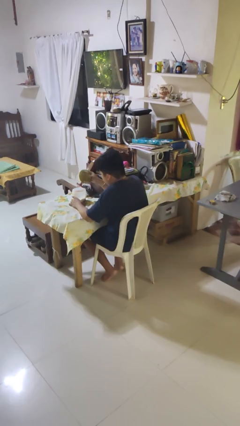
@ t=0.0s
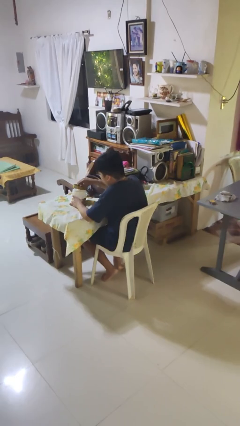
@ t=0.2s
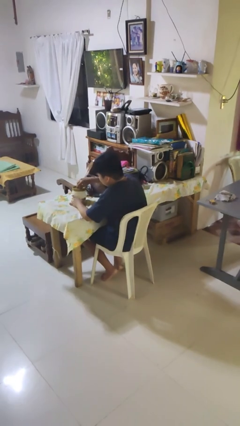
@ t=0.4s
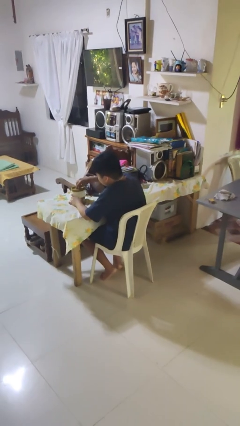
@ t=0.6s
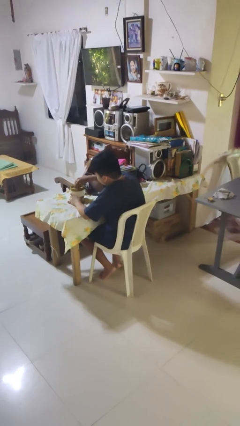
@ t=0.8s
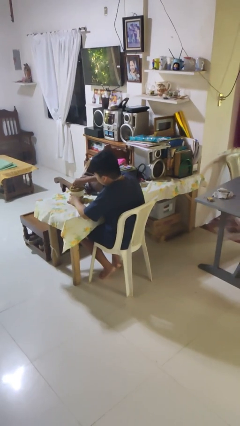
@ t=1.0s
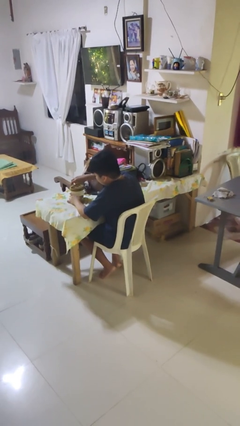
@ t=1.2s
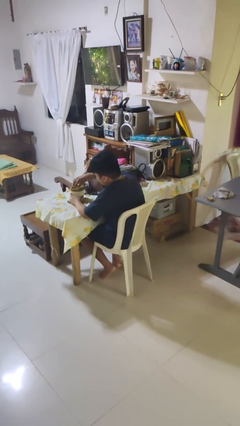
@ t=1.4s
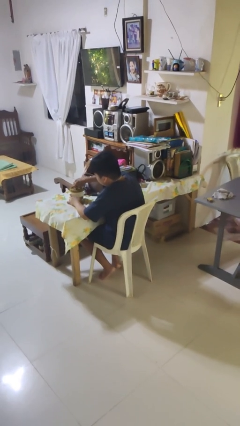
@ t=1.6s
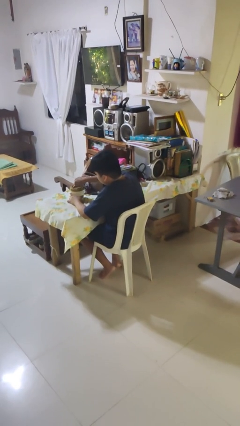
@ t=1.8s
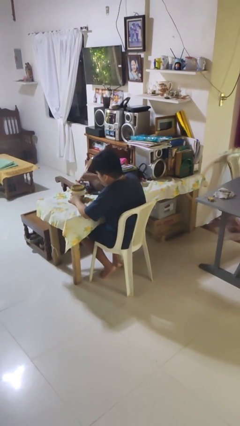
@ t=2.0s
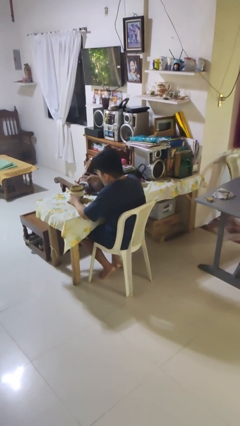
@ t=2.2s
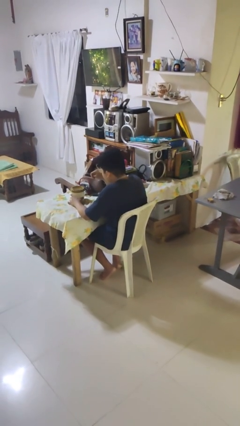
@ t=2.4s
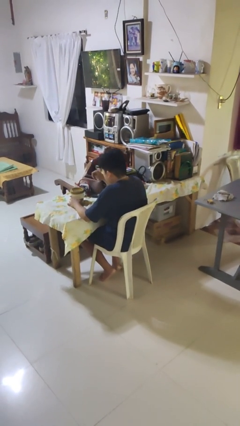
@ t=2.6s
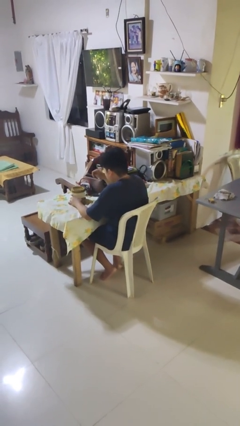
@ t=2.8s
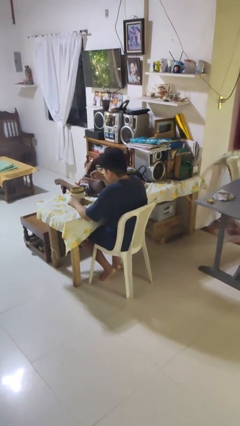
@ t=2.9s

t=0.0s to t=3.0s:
person closes jar

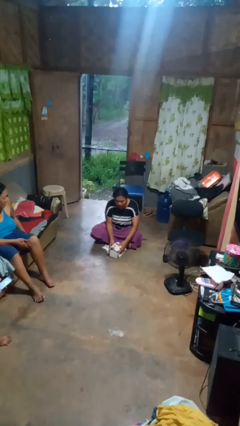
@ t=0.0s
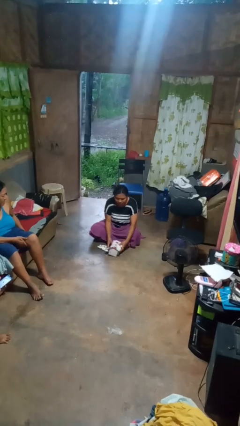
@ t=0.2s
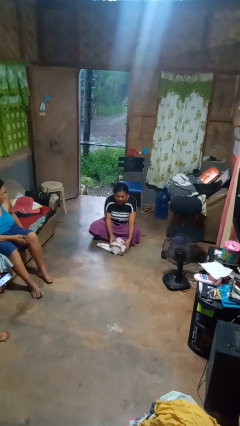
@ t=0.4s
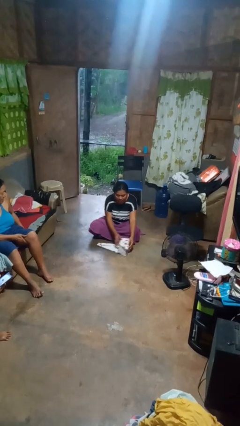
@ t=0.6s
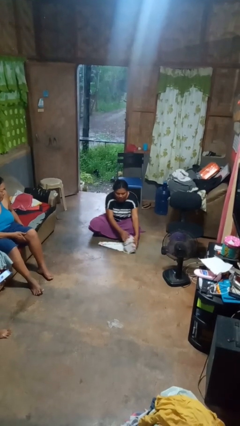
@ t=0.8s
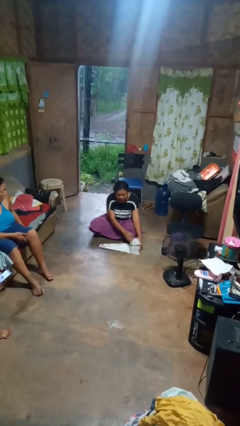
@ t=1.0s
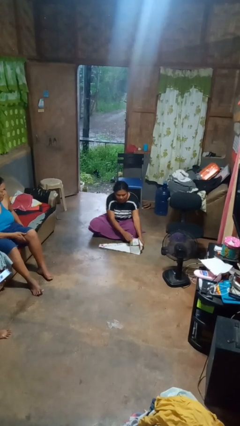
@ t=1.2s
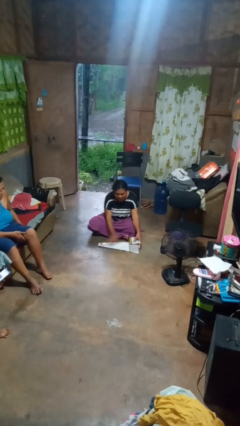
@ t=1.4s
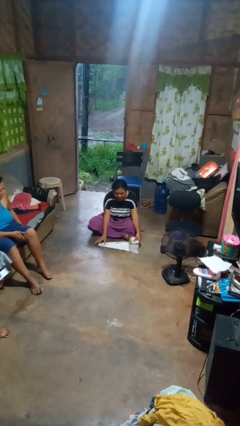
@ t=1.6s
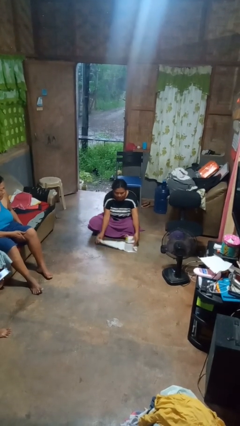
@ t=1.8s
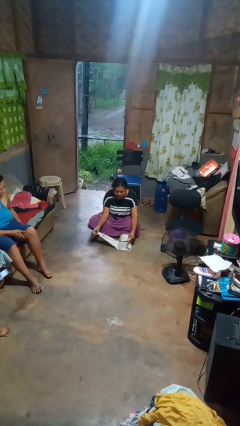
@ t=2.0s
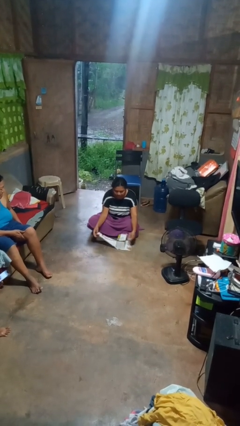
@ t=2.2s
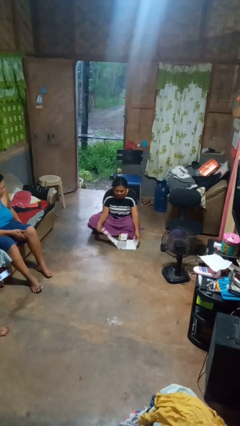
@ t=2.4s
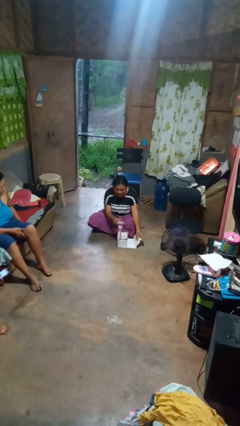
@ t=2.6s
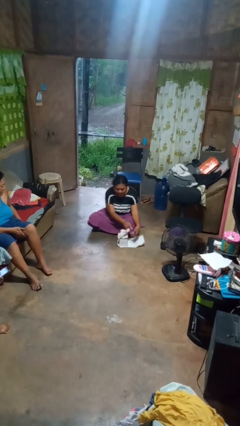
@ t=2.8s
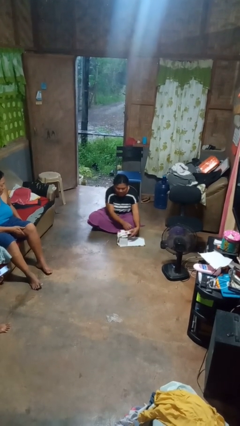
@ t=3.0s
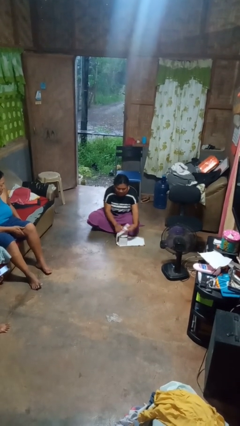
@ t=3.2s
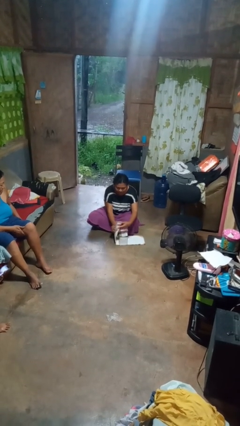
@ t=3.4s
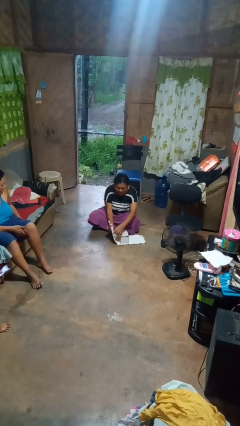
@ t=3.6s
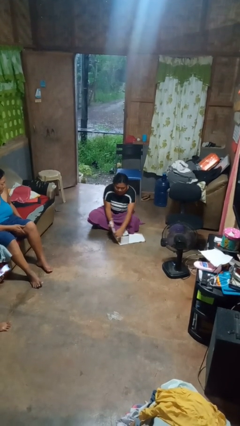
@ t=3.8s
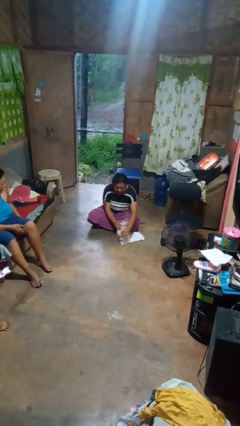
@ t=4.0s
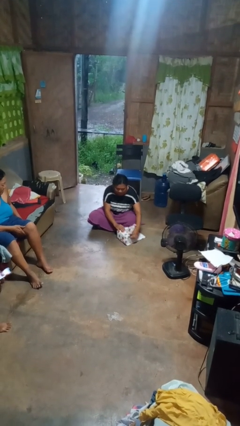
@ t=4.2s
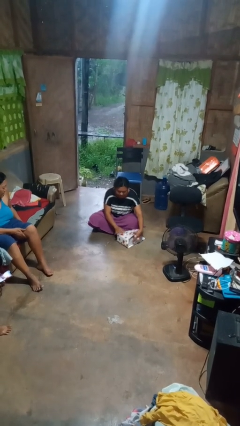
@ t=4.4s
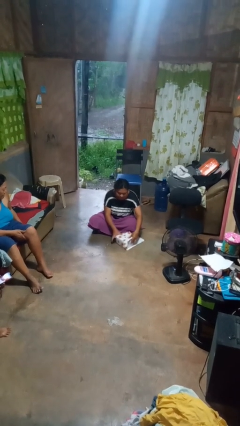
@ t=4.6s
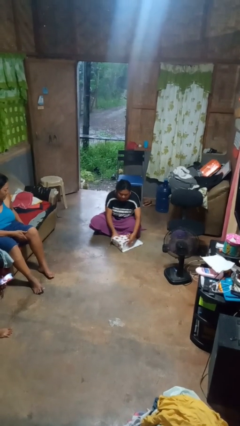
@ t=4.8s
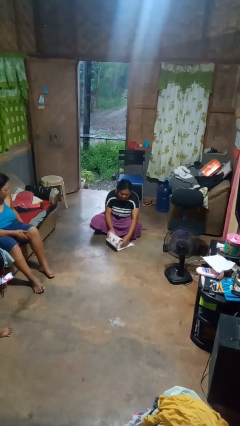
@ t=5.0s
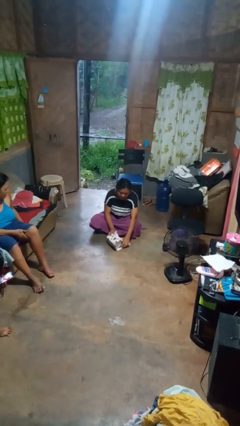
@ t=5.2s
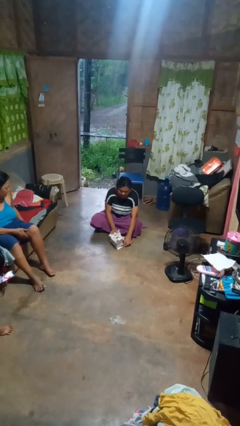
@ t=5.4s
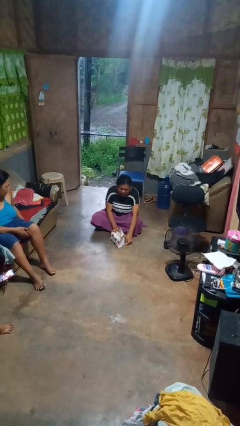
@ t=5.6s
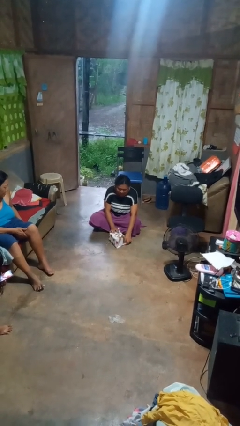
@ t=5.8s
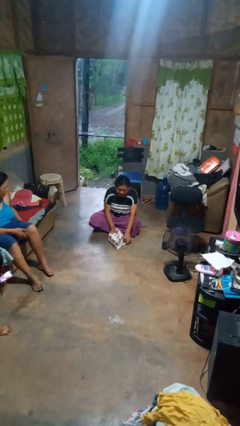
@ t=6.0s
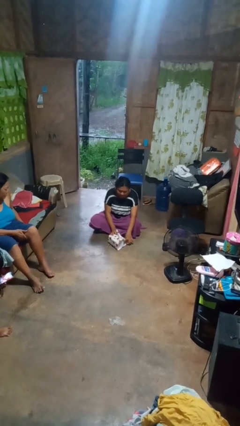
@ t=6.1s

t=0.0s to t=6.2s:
person wraps box

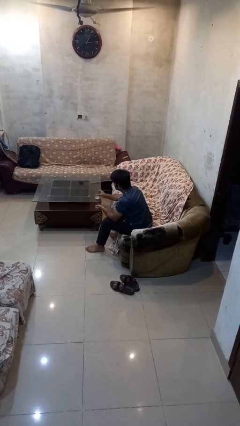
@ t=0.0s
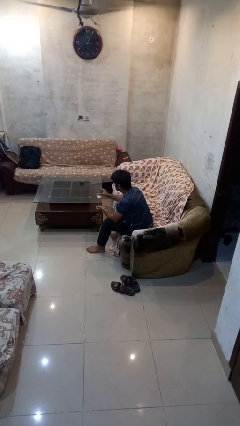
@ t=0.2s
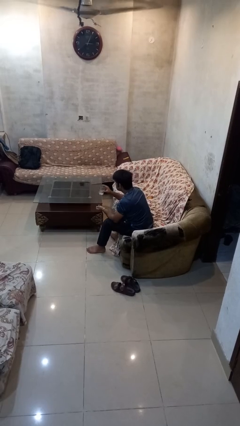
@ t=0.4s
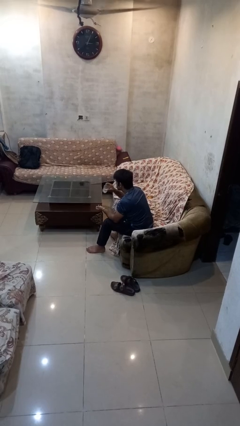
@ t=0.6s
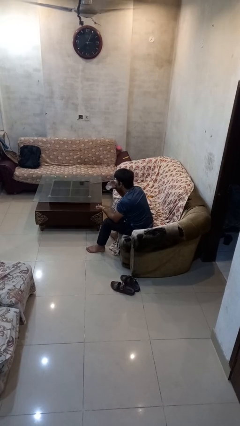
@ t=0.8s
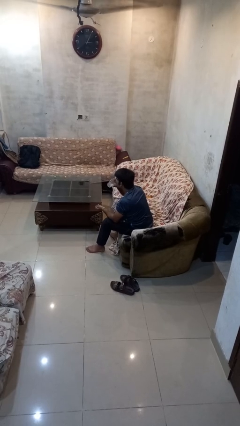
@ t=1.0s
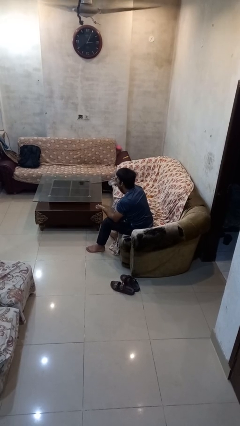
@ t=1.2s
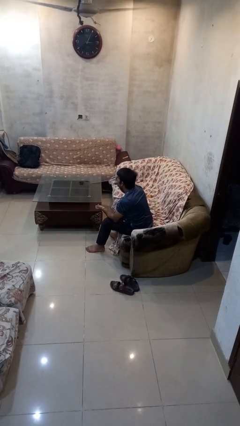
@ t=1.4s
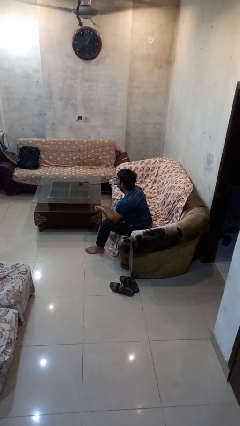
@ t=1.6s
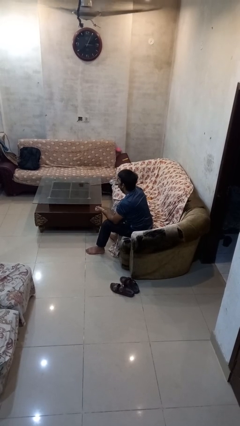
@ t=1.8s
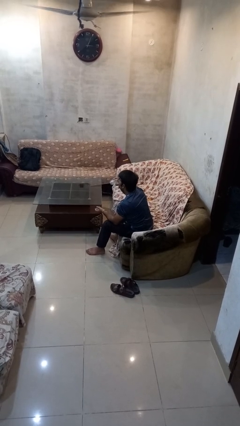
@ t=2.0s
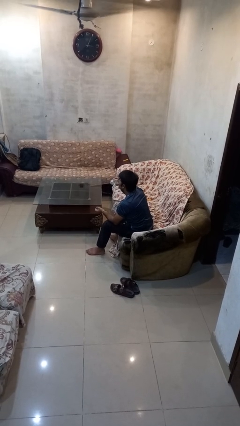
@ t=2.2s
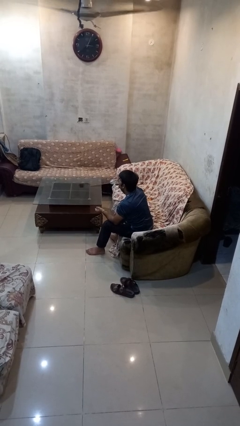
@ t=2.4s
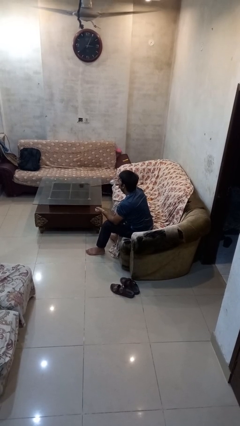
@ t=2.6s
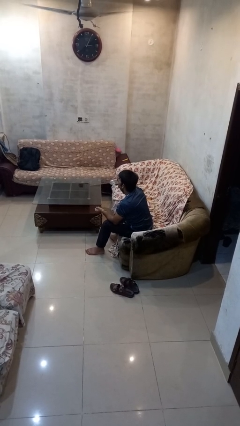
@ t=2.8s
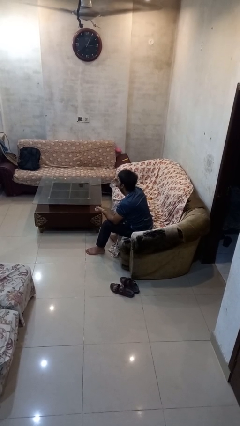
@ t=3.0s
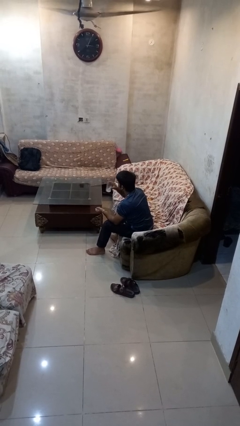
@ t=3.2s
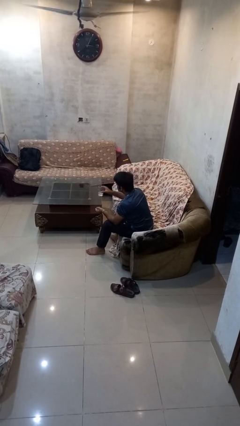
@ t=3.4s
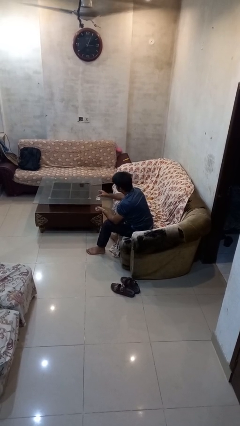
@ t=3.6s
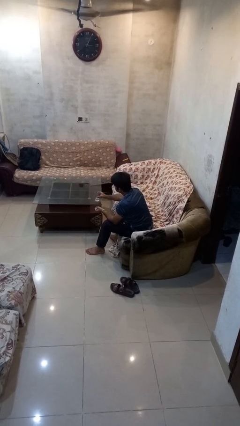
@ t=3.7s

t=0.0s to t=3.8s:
person drinks from cup

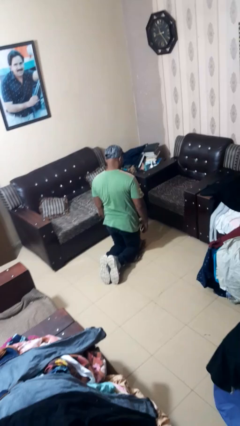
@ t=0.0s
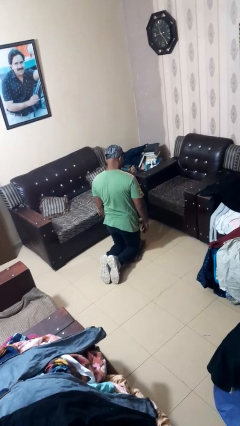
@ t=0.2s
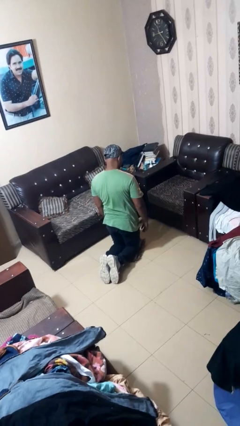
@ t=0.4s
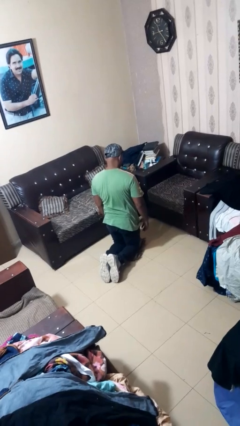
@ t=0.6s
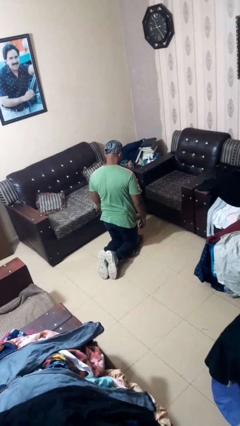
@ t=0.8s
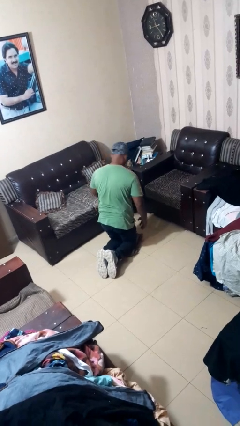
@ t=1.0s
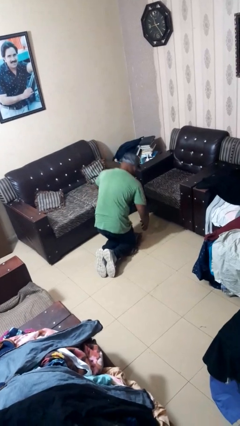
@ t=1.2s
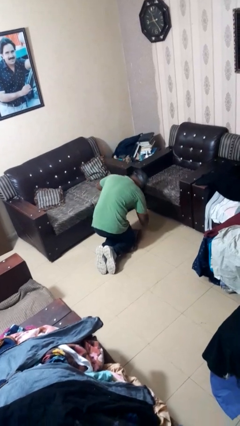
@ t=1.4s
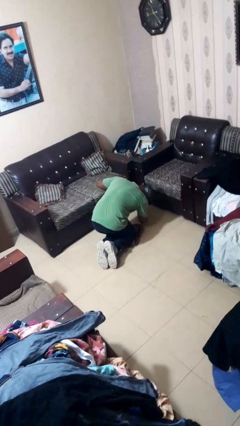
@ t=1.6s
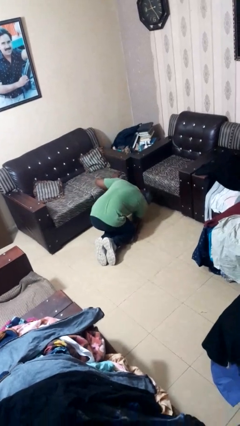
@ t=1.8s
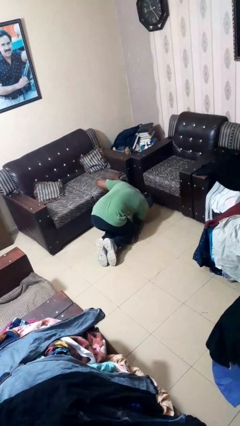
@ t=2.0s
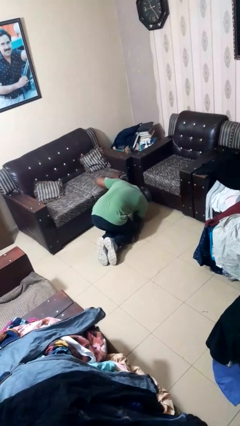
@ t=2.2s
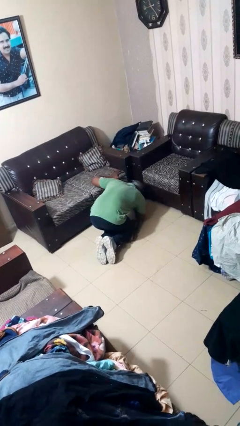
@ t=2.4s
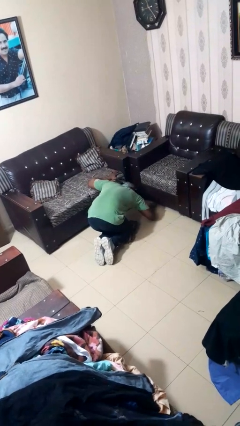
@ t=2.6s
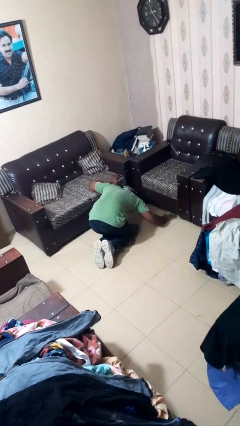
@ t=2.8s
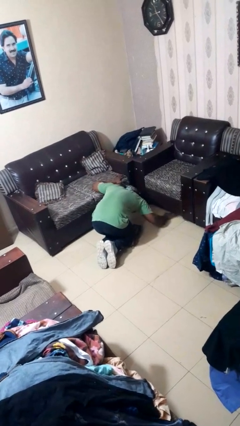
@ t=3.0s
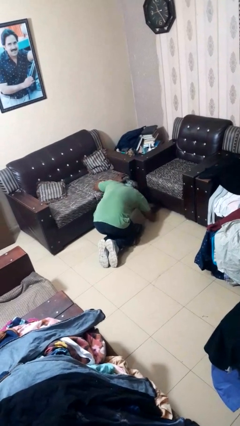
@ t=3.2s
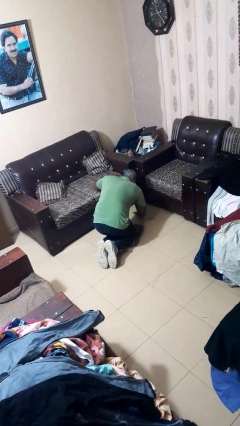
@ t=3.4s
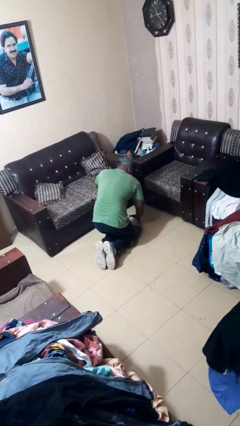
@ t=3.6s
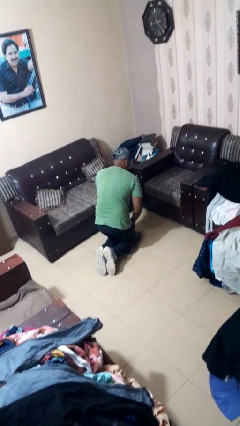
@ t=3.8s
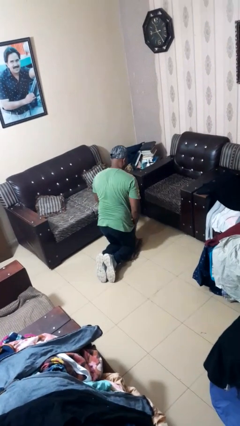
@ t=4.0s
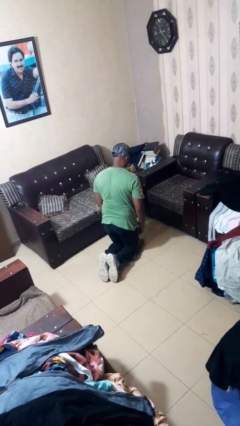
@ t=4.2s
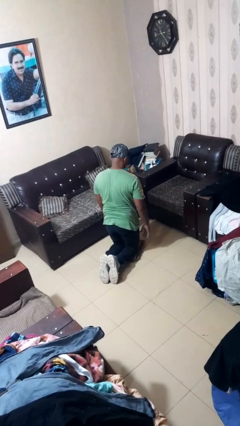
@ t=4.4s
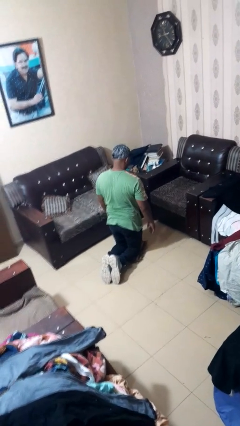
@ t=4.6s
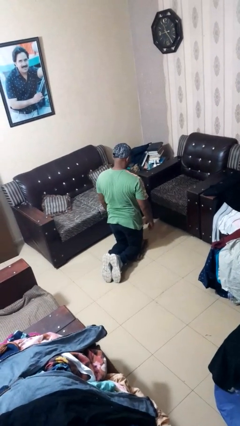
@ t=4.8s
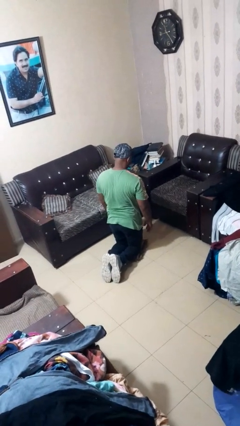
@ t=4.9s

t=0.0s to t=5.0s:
person searches under couch
